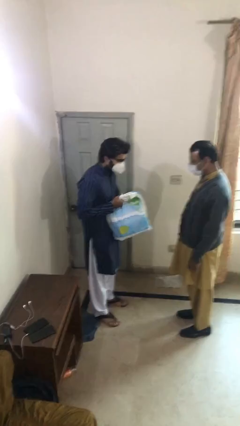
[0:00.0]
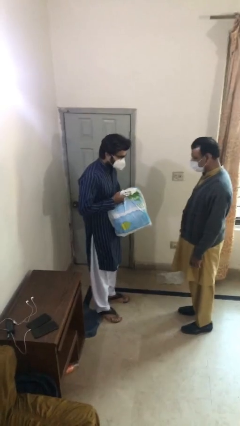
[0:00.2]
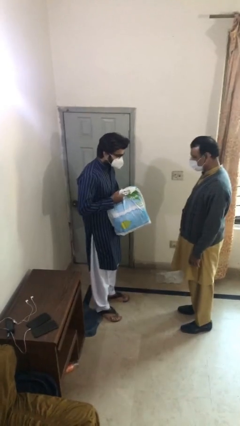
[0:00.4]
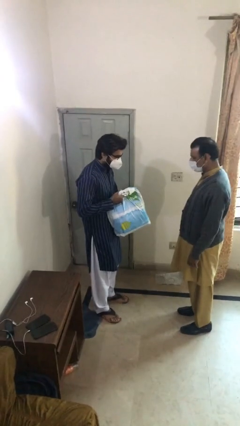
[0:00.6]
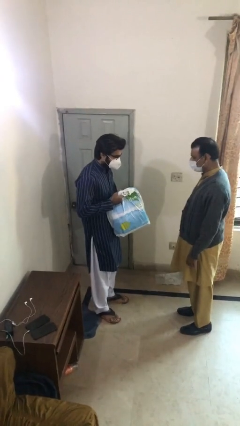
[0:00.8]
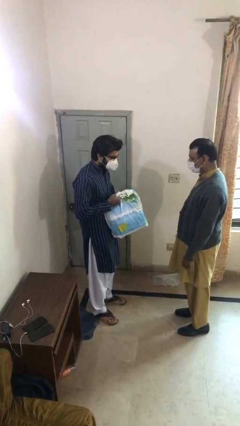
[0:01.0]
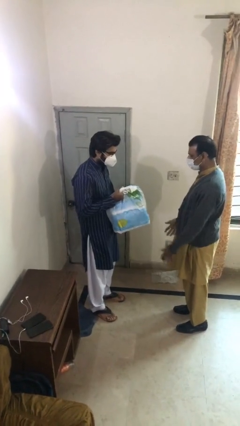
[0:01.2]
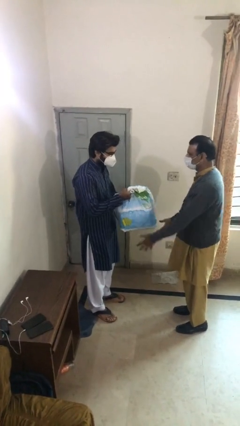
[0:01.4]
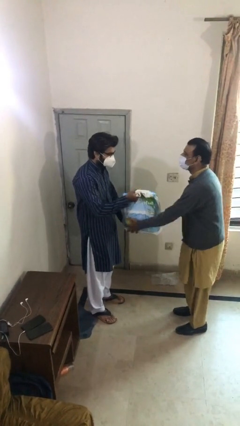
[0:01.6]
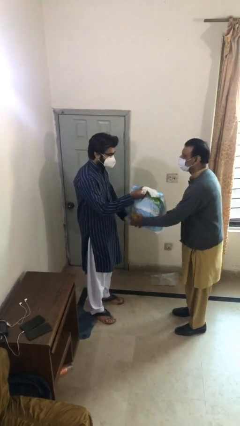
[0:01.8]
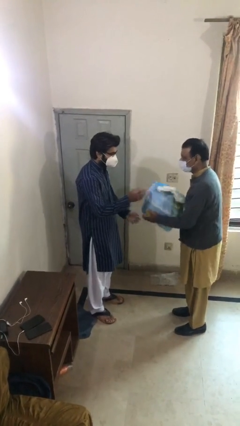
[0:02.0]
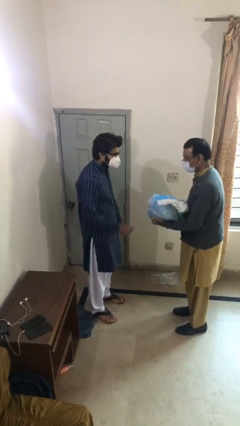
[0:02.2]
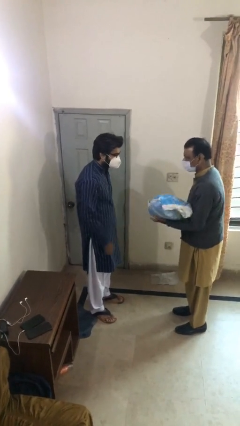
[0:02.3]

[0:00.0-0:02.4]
person transfers object to person

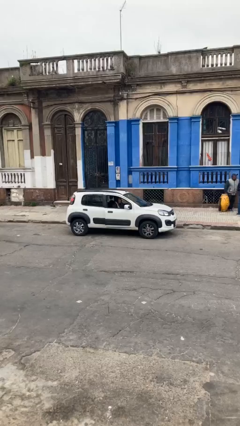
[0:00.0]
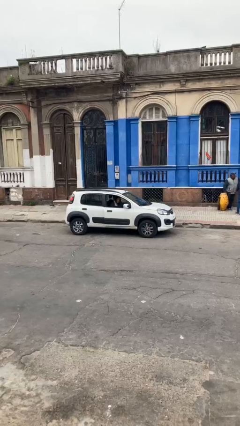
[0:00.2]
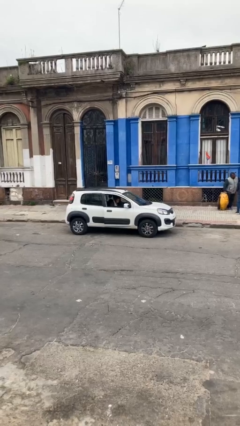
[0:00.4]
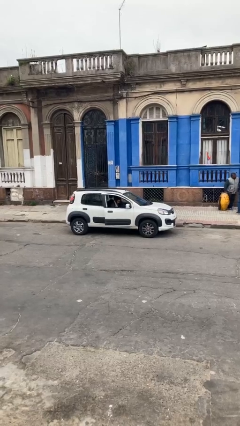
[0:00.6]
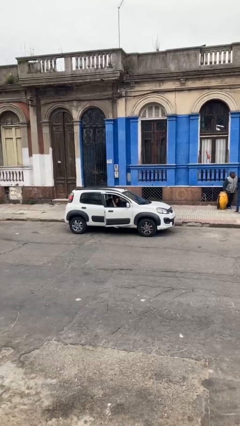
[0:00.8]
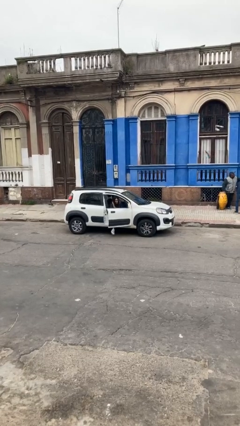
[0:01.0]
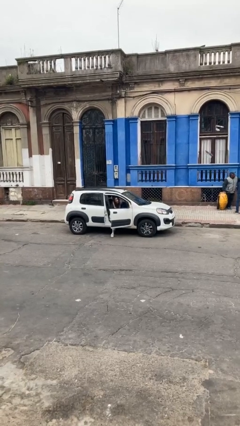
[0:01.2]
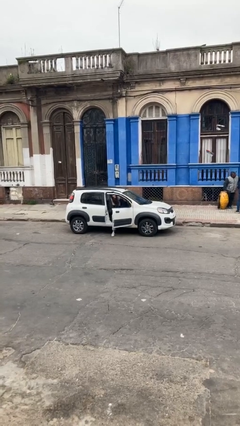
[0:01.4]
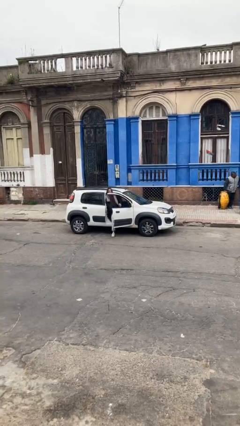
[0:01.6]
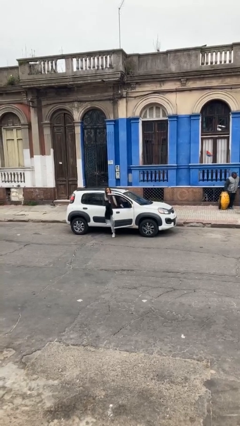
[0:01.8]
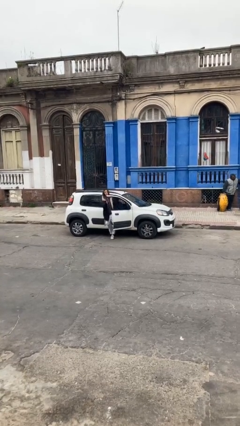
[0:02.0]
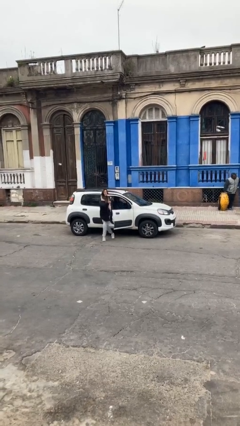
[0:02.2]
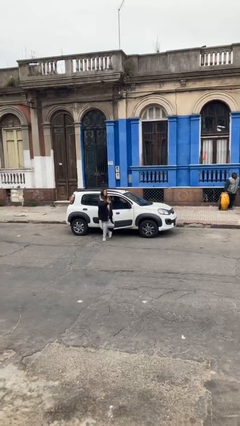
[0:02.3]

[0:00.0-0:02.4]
car drops off person

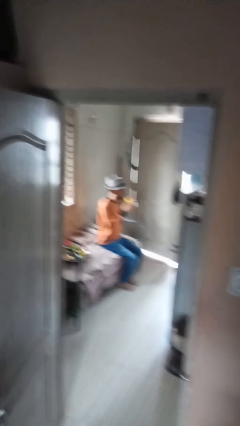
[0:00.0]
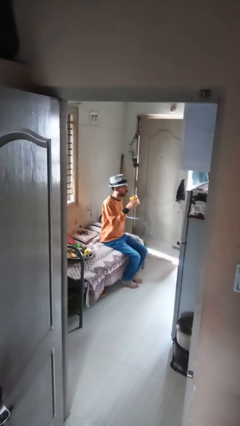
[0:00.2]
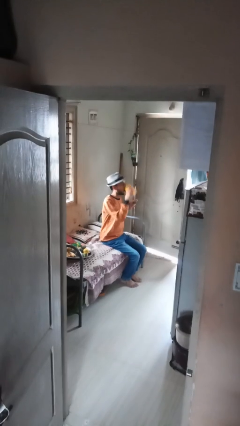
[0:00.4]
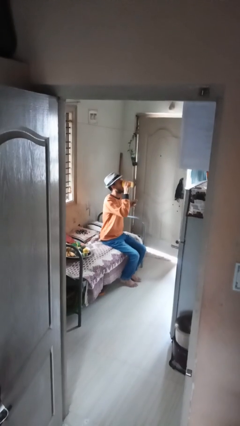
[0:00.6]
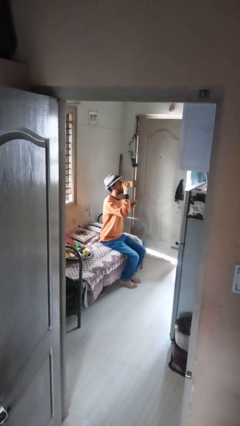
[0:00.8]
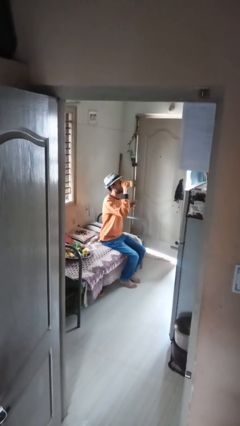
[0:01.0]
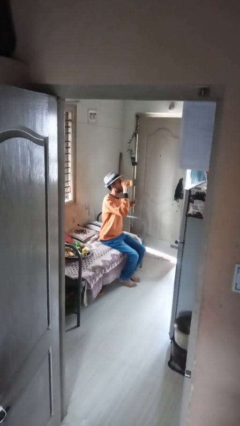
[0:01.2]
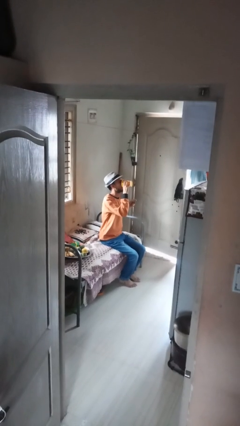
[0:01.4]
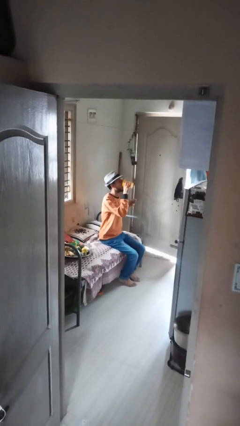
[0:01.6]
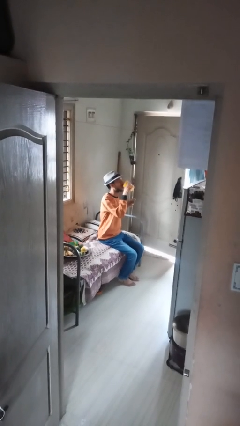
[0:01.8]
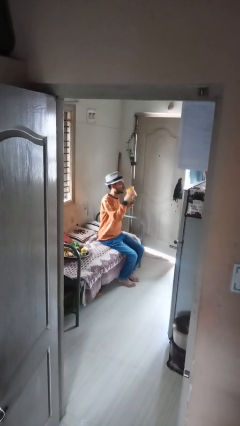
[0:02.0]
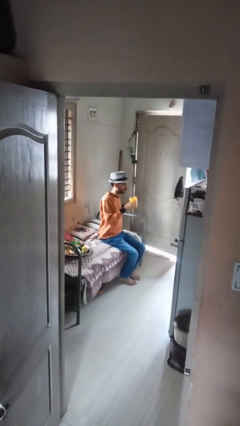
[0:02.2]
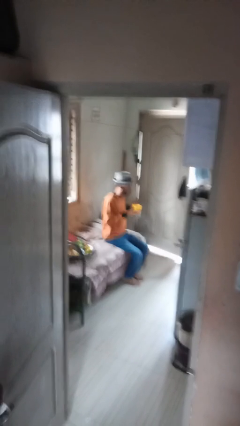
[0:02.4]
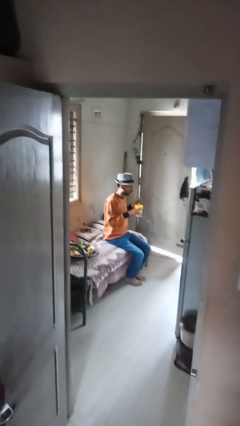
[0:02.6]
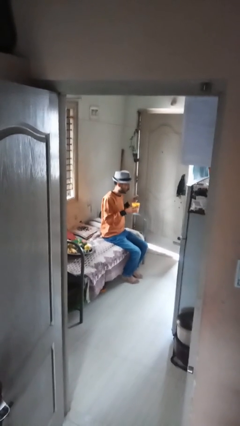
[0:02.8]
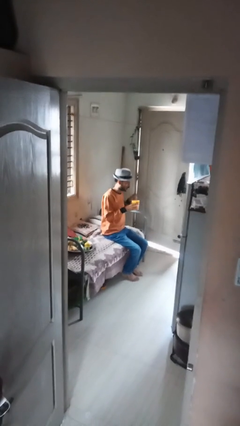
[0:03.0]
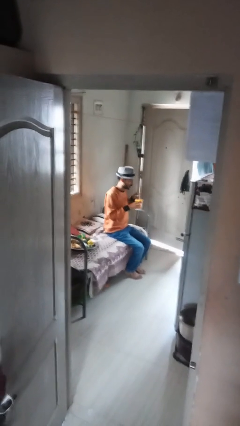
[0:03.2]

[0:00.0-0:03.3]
person drinks from mug

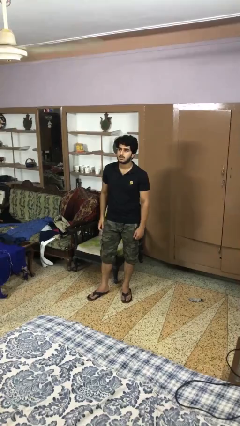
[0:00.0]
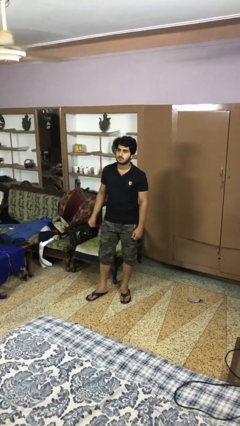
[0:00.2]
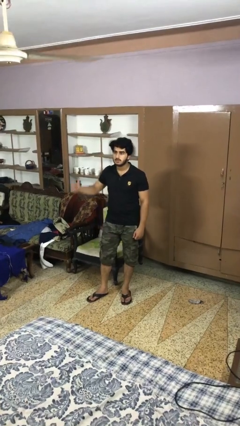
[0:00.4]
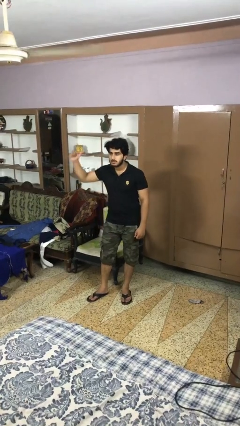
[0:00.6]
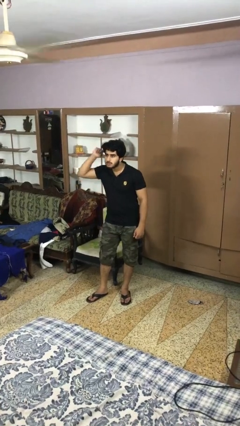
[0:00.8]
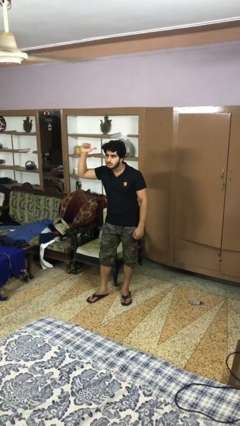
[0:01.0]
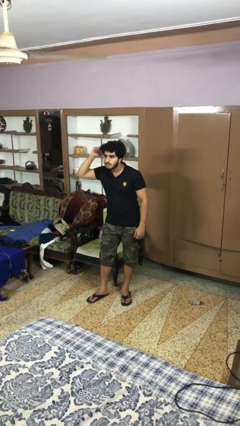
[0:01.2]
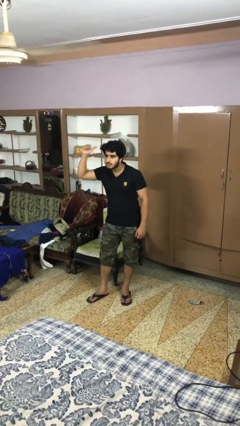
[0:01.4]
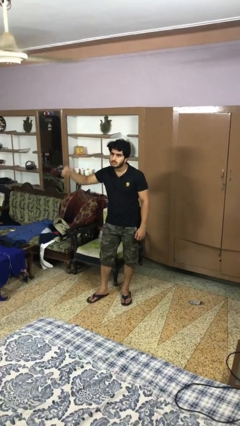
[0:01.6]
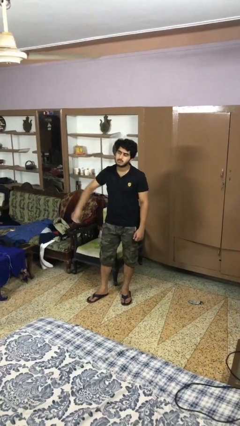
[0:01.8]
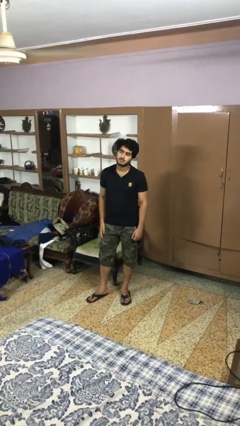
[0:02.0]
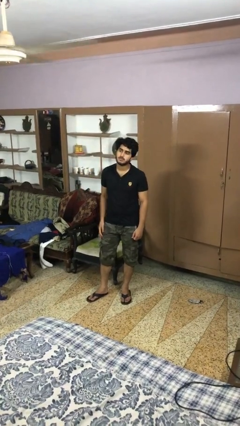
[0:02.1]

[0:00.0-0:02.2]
person gestures behind me

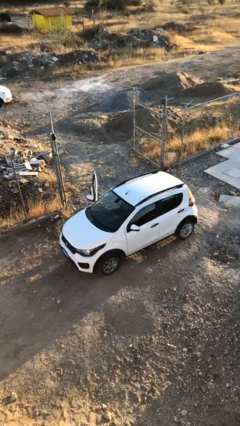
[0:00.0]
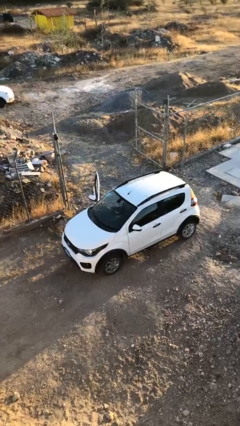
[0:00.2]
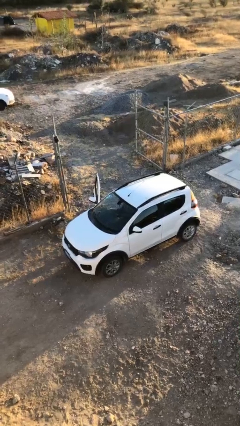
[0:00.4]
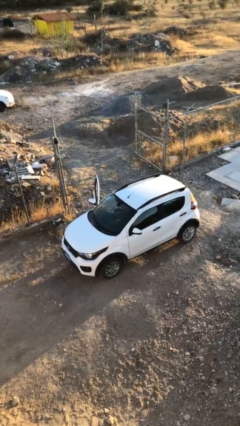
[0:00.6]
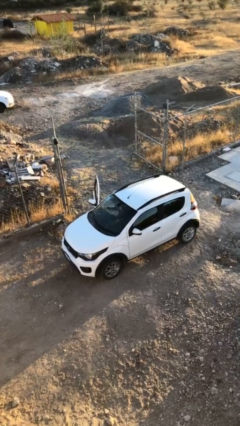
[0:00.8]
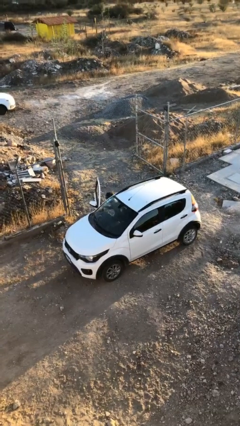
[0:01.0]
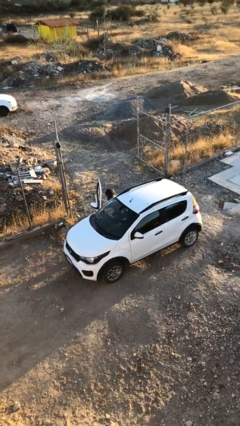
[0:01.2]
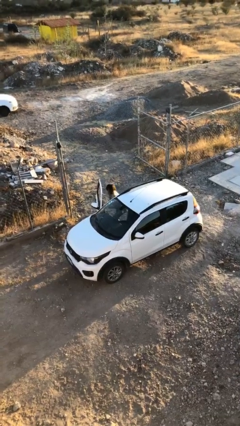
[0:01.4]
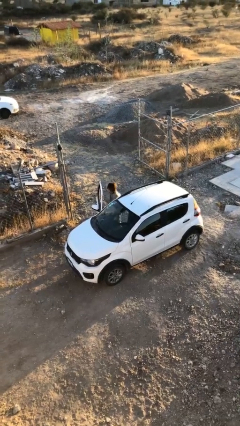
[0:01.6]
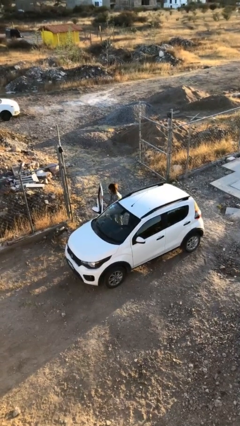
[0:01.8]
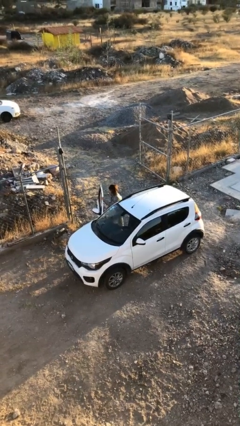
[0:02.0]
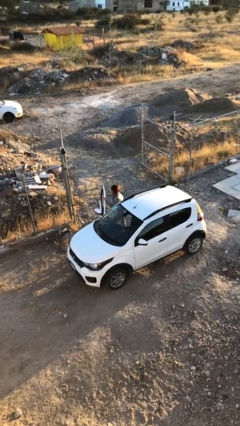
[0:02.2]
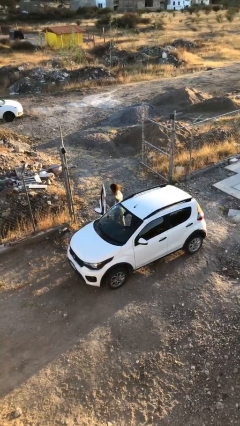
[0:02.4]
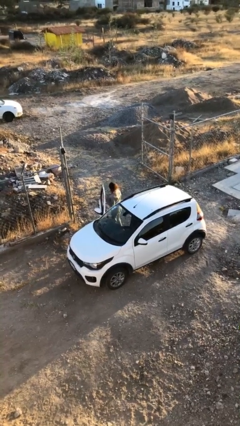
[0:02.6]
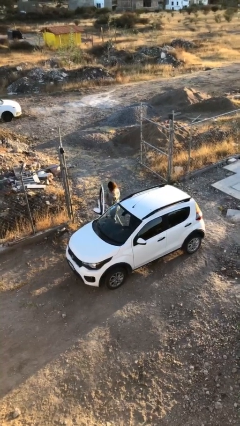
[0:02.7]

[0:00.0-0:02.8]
person exits car

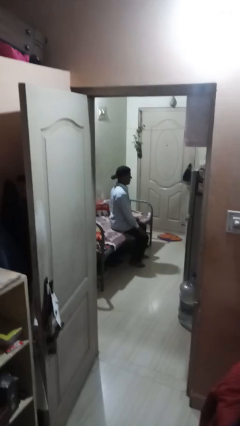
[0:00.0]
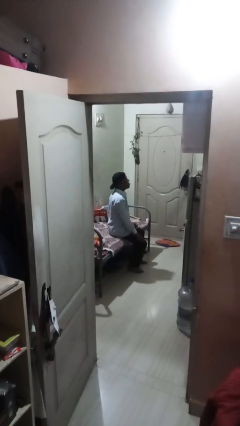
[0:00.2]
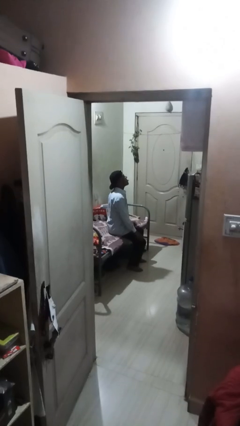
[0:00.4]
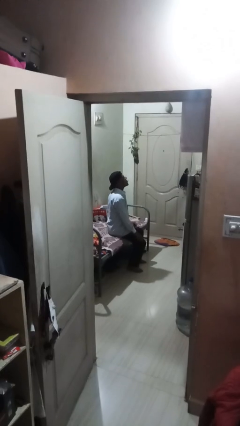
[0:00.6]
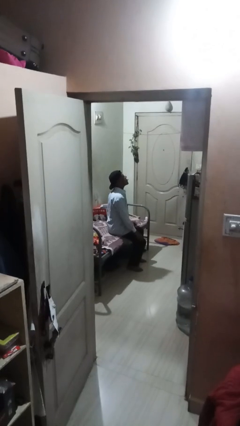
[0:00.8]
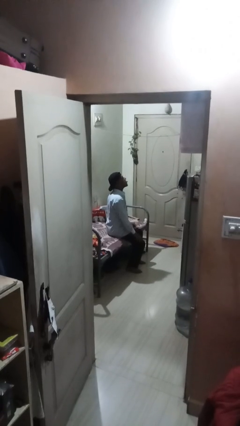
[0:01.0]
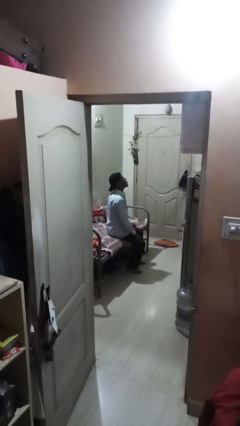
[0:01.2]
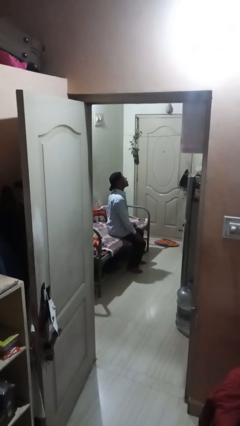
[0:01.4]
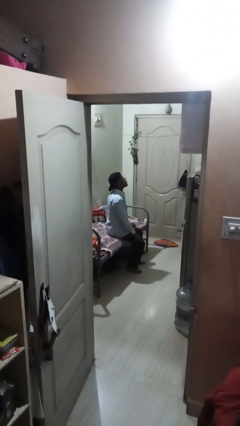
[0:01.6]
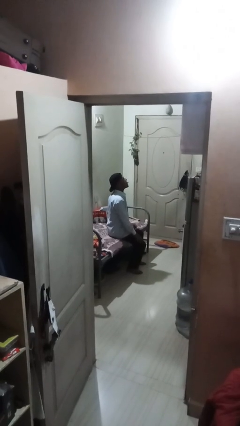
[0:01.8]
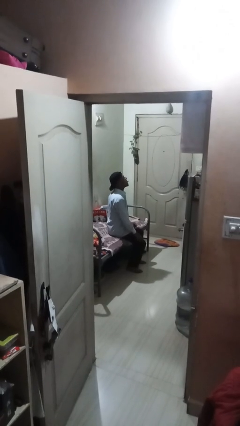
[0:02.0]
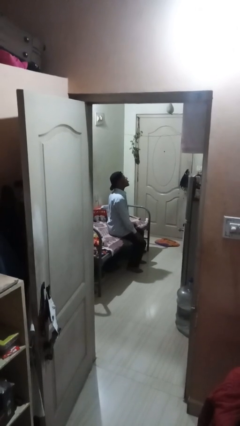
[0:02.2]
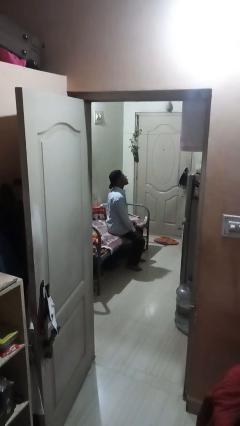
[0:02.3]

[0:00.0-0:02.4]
person sticks out tongue

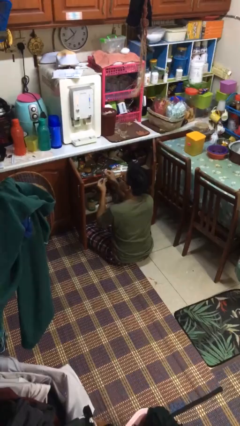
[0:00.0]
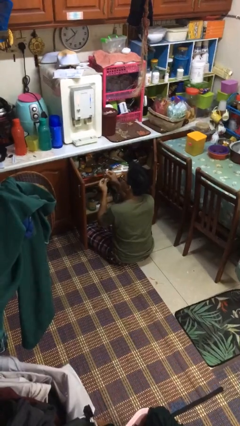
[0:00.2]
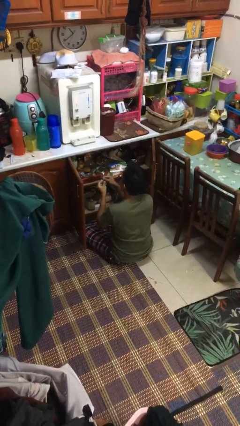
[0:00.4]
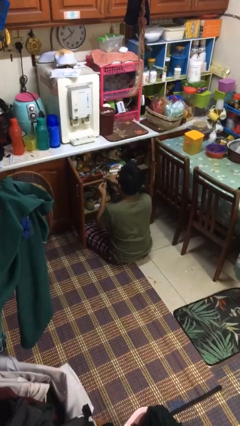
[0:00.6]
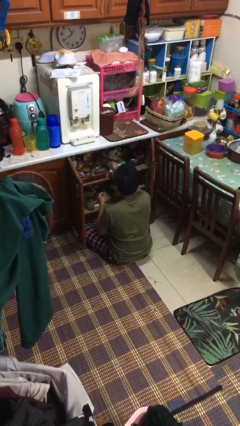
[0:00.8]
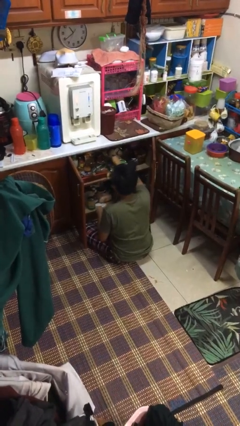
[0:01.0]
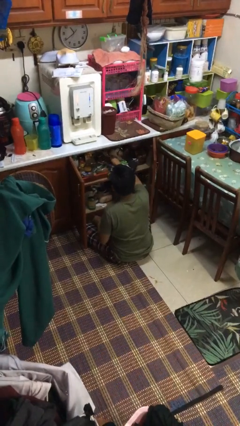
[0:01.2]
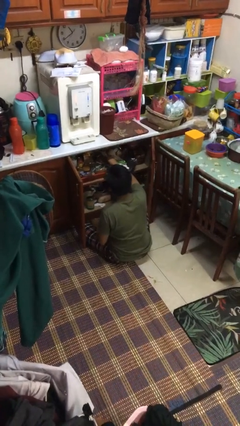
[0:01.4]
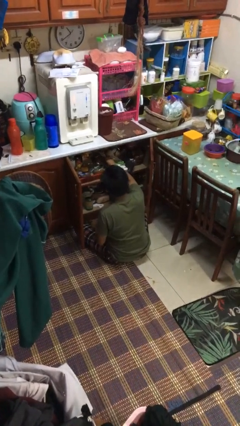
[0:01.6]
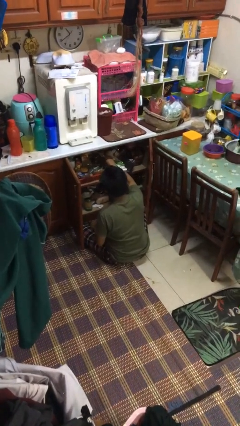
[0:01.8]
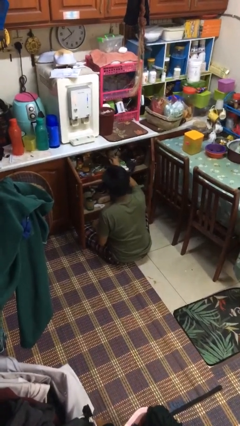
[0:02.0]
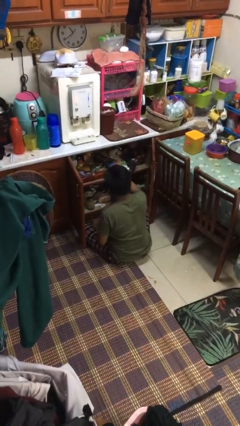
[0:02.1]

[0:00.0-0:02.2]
person puts object into kitchen drawer
